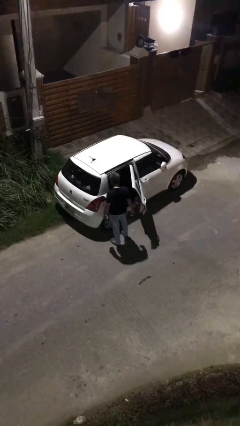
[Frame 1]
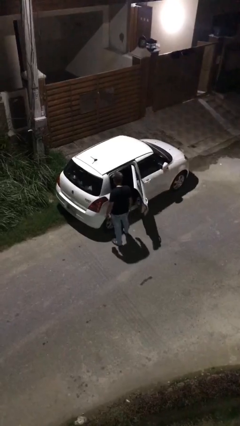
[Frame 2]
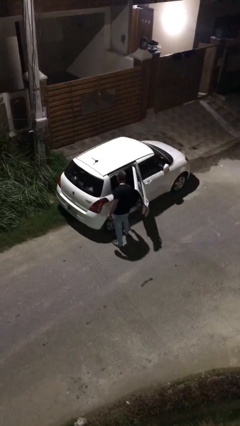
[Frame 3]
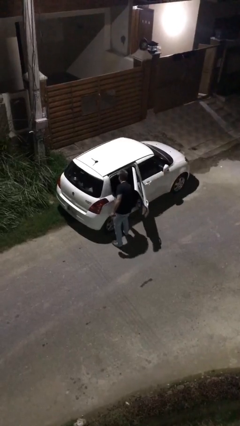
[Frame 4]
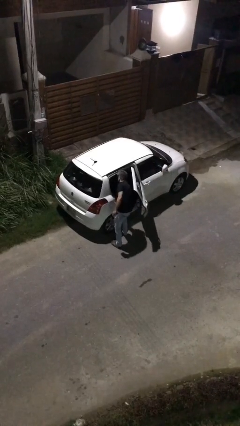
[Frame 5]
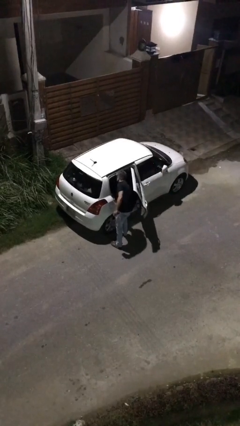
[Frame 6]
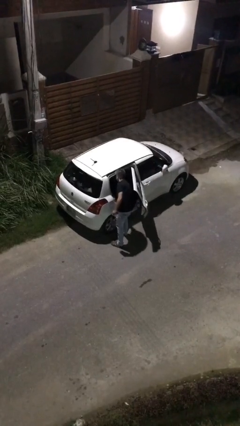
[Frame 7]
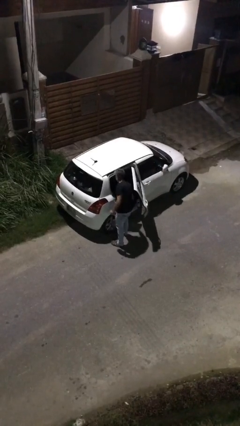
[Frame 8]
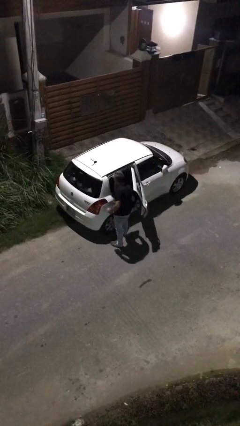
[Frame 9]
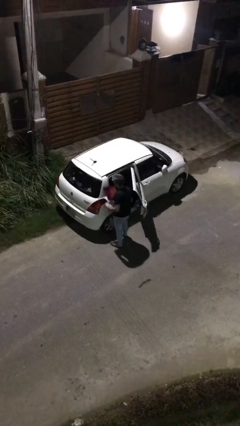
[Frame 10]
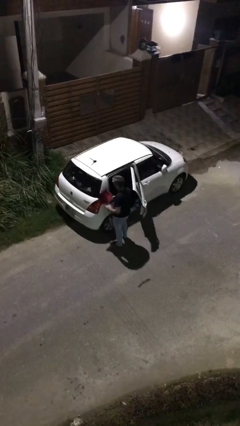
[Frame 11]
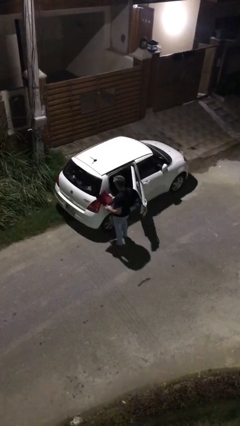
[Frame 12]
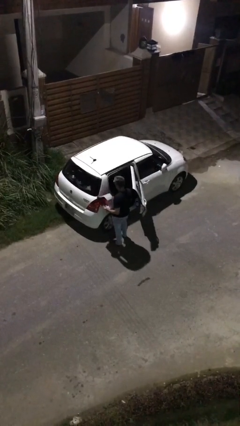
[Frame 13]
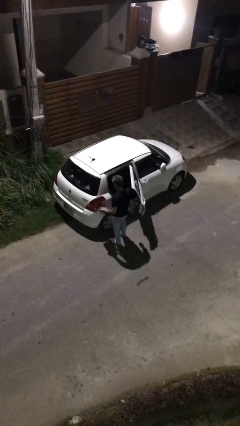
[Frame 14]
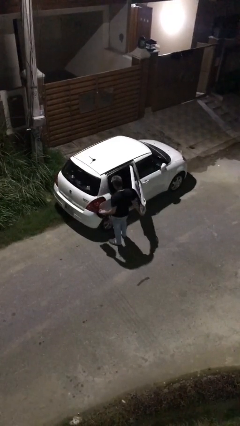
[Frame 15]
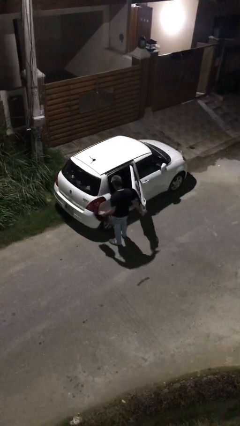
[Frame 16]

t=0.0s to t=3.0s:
person unloads car

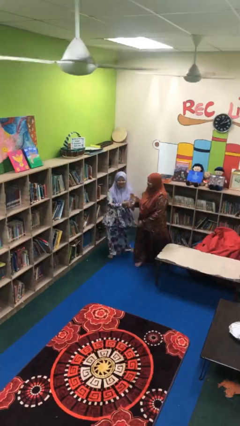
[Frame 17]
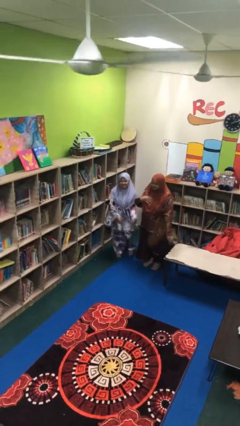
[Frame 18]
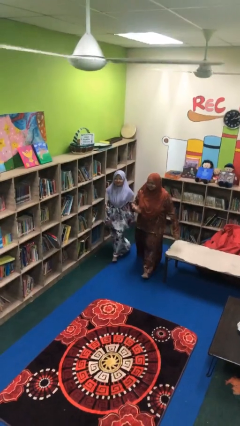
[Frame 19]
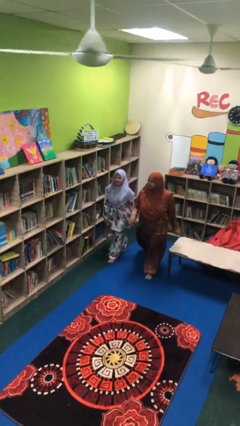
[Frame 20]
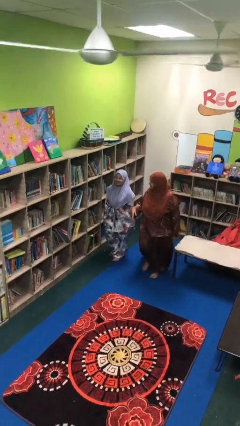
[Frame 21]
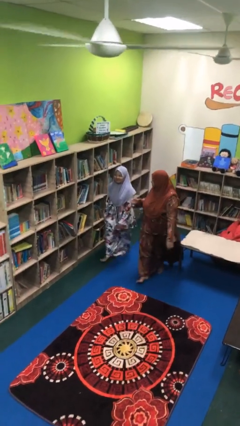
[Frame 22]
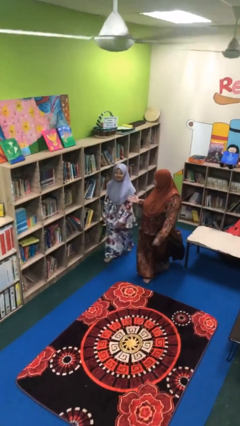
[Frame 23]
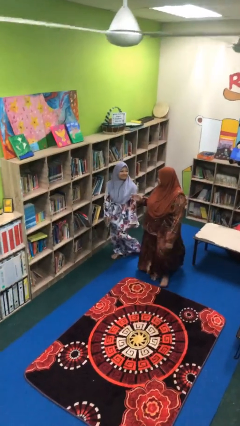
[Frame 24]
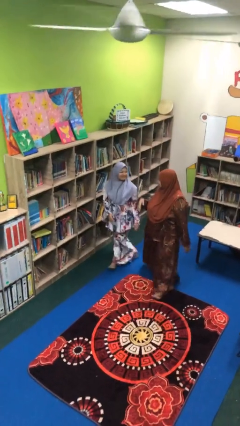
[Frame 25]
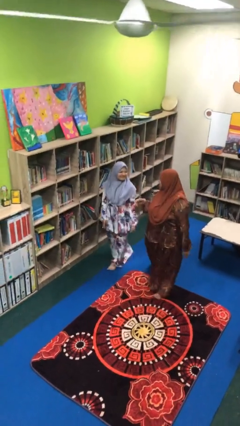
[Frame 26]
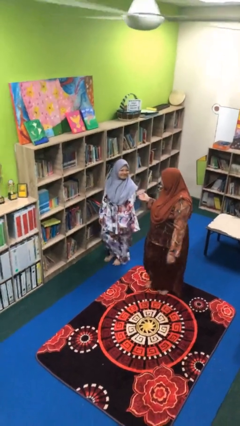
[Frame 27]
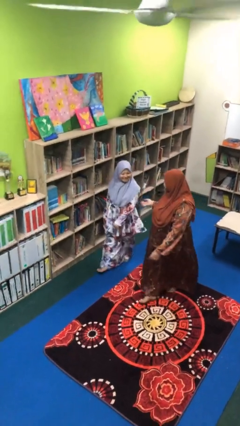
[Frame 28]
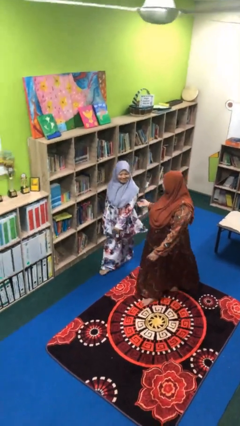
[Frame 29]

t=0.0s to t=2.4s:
person talks to person

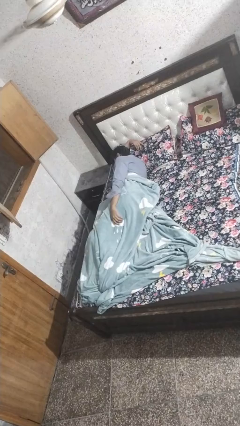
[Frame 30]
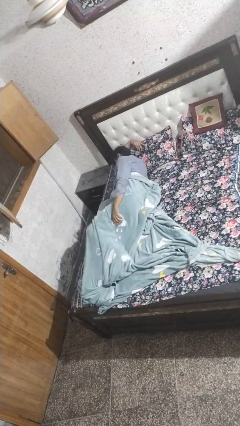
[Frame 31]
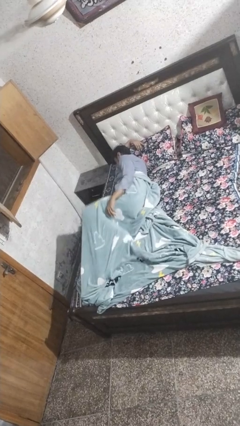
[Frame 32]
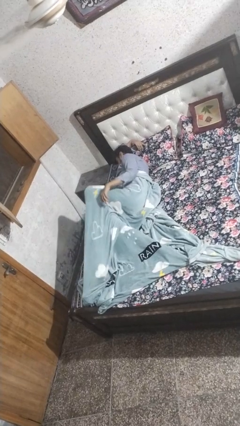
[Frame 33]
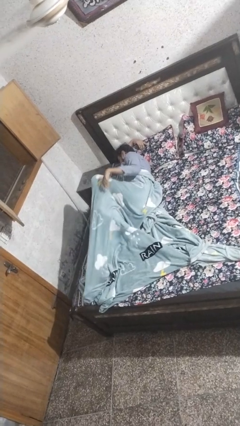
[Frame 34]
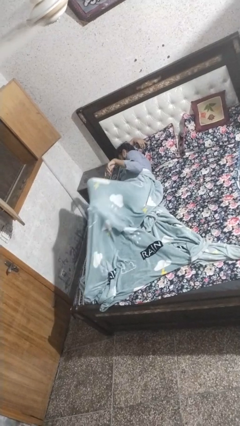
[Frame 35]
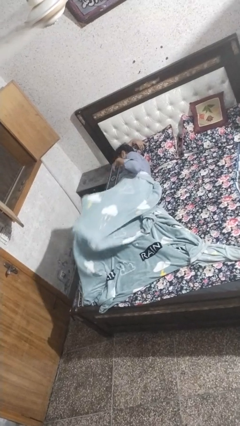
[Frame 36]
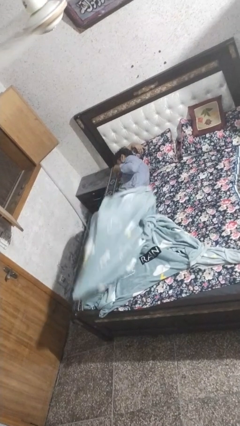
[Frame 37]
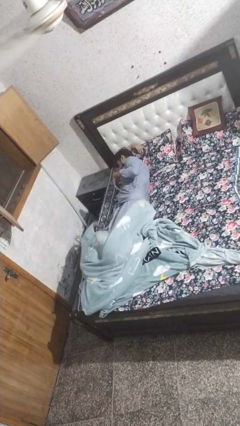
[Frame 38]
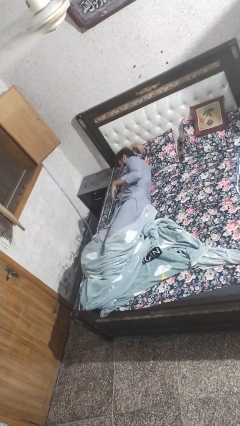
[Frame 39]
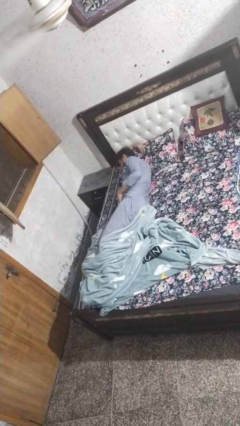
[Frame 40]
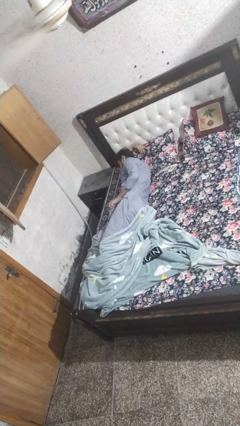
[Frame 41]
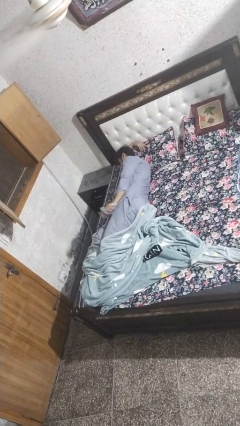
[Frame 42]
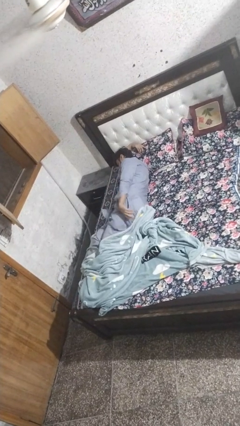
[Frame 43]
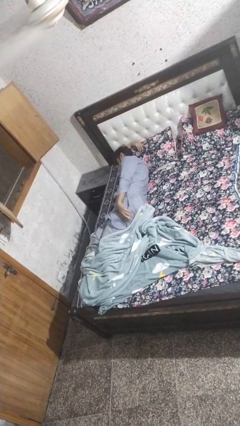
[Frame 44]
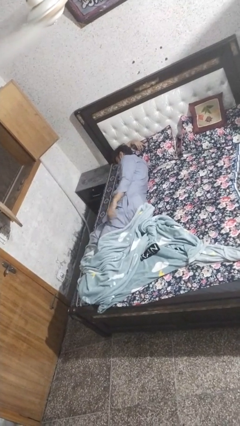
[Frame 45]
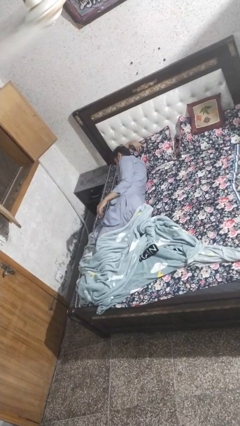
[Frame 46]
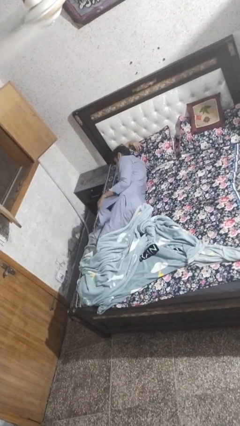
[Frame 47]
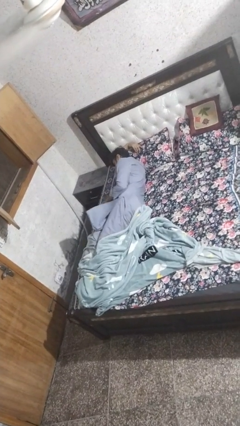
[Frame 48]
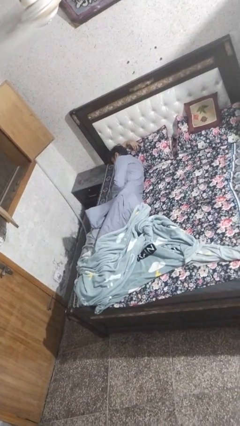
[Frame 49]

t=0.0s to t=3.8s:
person uncovers with bedsheets

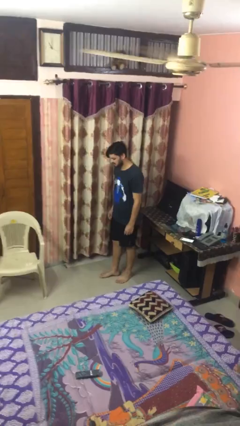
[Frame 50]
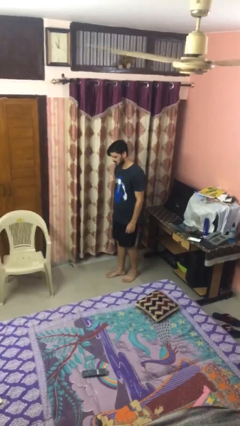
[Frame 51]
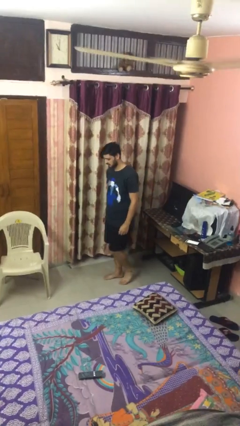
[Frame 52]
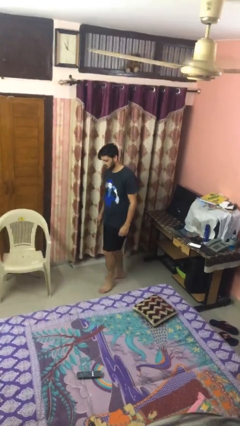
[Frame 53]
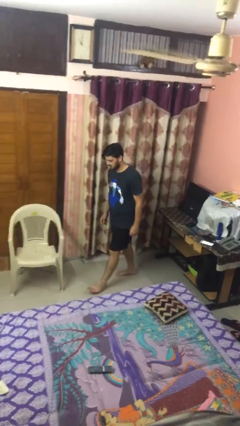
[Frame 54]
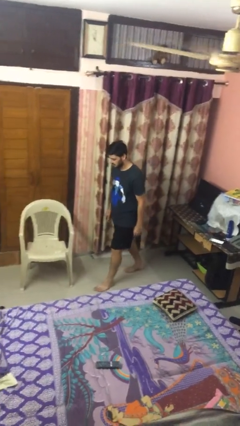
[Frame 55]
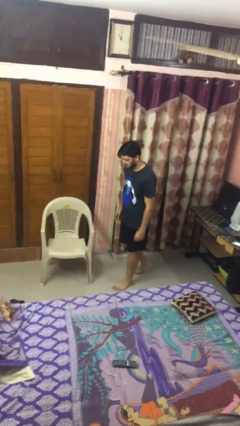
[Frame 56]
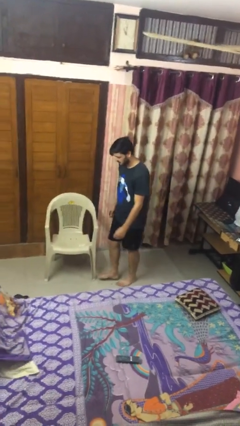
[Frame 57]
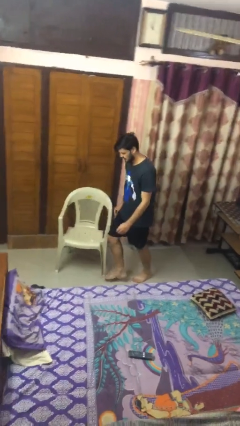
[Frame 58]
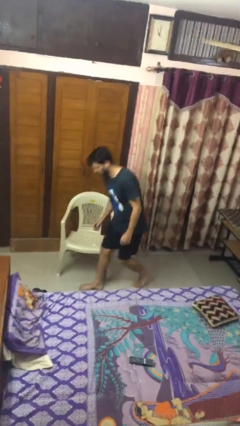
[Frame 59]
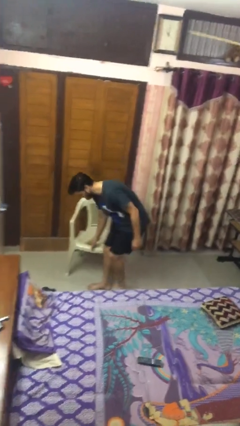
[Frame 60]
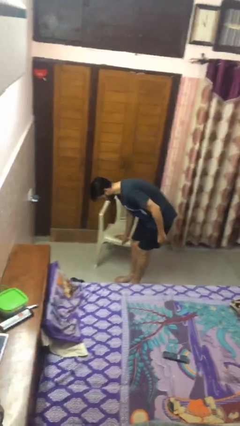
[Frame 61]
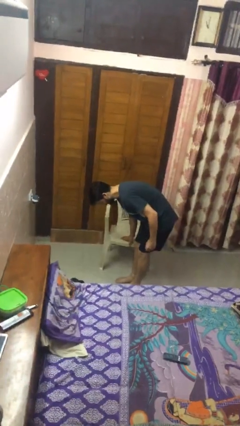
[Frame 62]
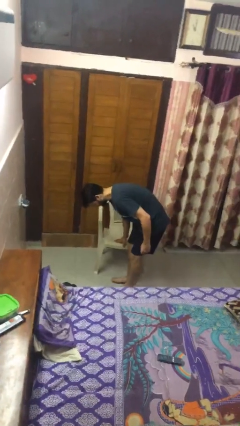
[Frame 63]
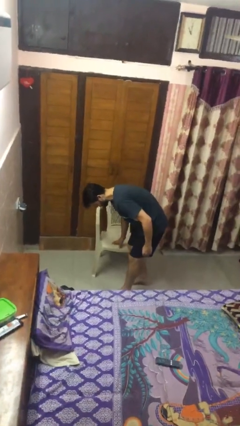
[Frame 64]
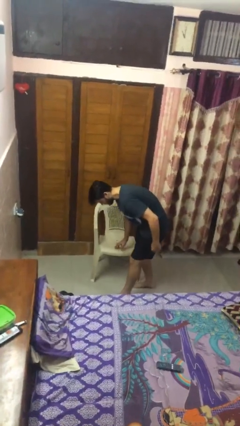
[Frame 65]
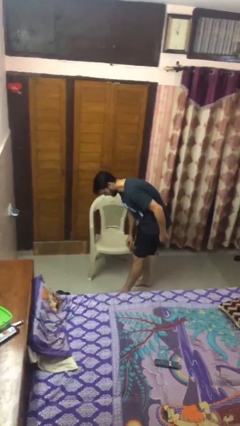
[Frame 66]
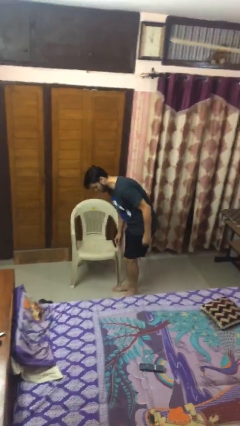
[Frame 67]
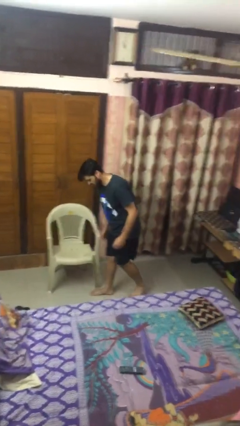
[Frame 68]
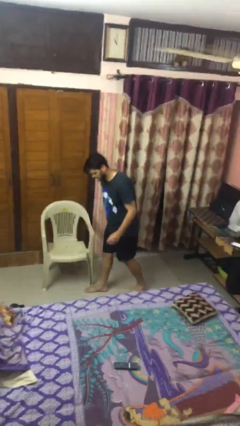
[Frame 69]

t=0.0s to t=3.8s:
person stubs toe

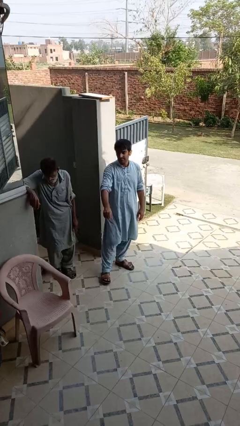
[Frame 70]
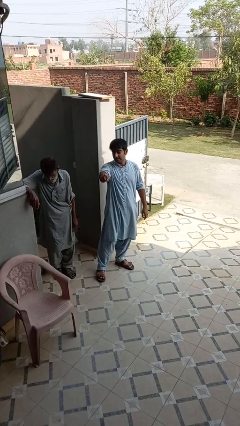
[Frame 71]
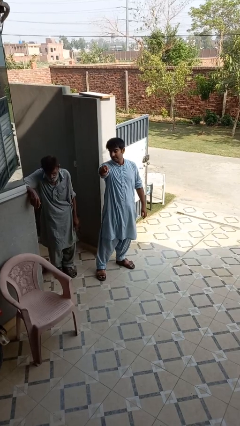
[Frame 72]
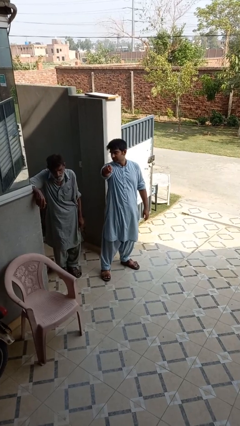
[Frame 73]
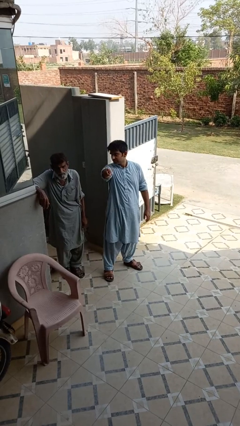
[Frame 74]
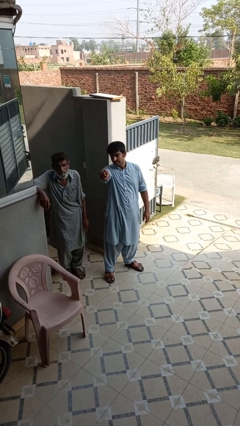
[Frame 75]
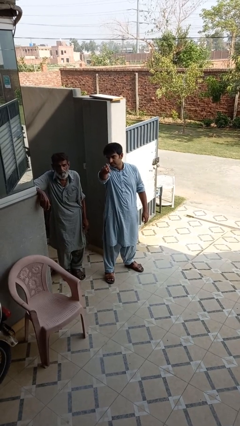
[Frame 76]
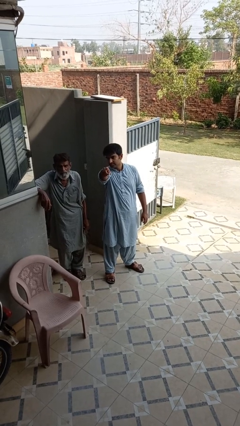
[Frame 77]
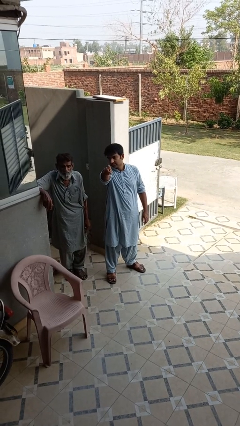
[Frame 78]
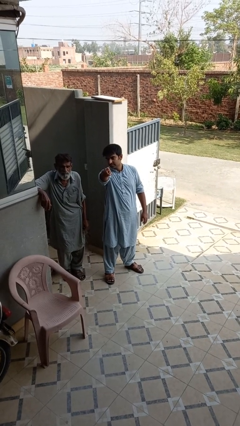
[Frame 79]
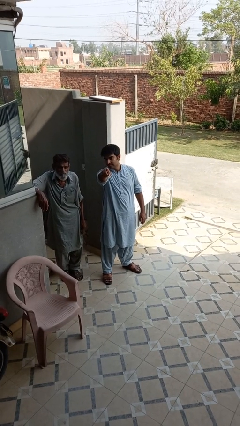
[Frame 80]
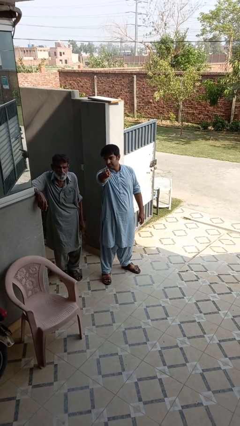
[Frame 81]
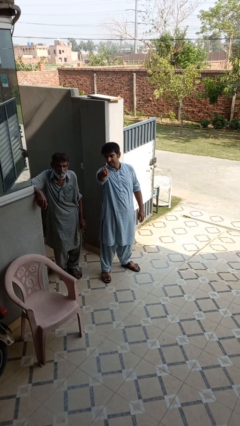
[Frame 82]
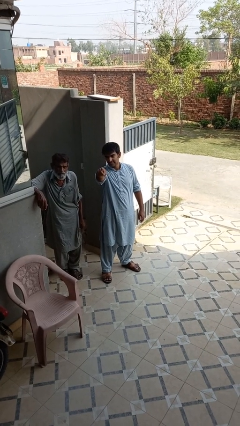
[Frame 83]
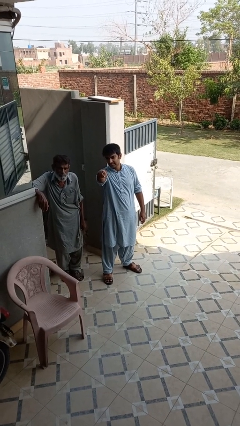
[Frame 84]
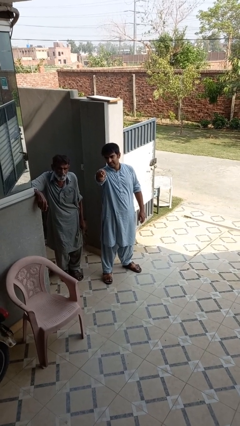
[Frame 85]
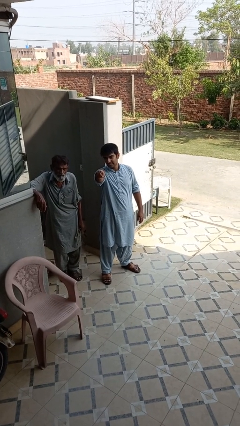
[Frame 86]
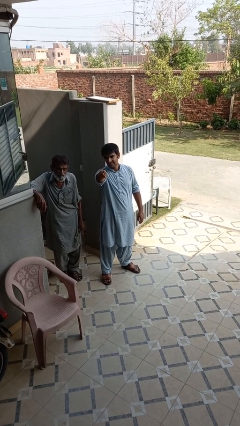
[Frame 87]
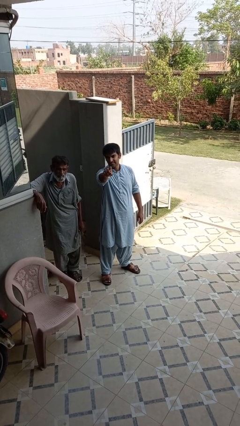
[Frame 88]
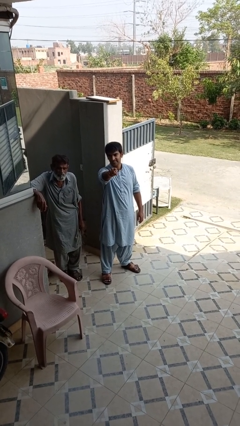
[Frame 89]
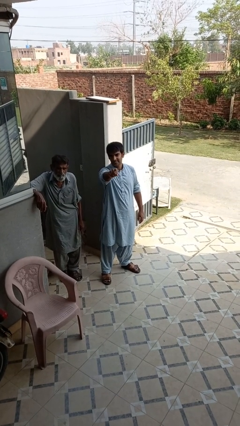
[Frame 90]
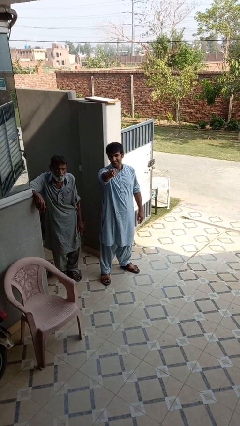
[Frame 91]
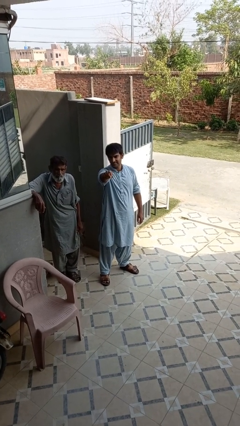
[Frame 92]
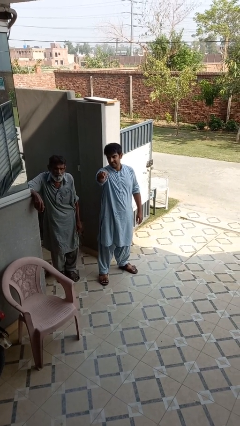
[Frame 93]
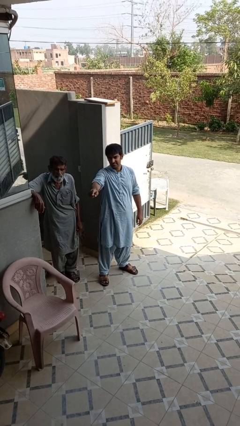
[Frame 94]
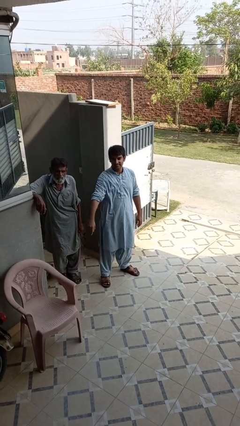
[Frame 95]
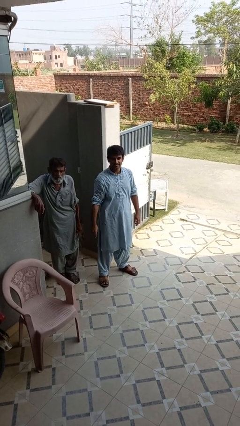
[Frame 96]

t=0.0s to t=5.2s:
person points at person
